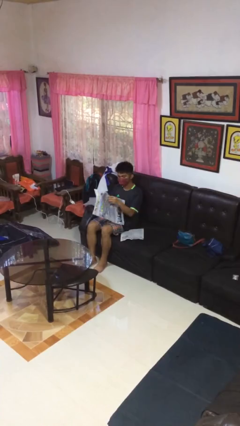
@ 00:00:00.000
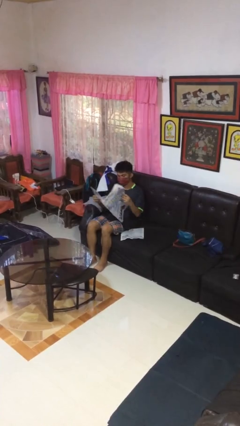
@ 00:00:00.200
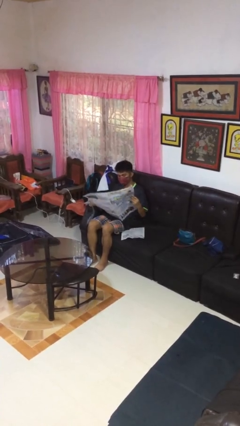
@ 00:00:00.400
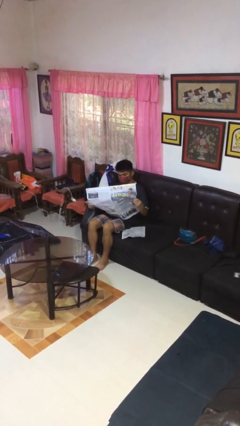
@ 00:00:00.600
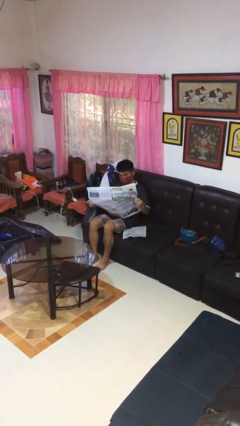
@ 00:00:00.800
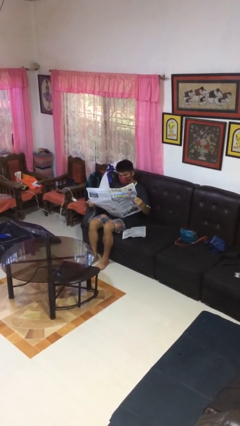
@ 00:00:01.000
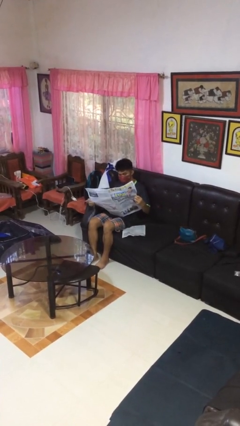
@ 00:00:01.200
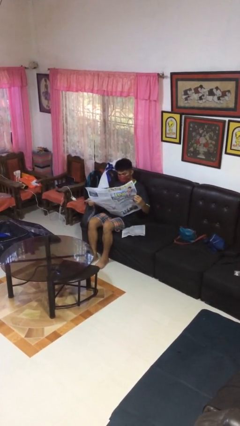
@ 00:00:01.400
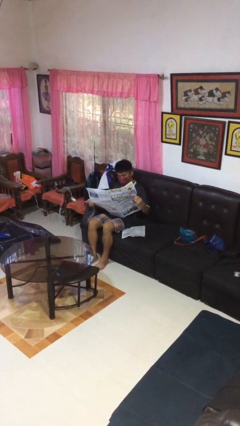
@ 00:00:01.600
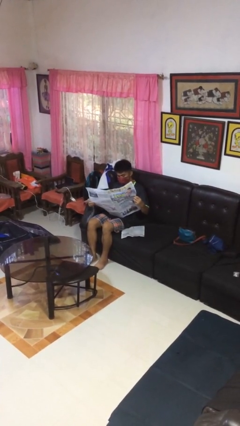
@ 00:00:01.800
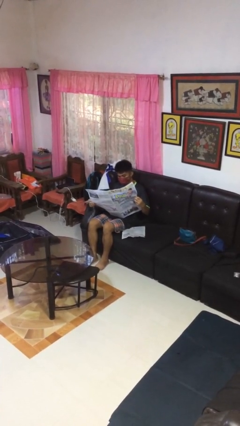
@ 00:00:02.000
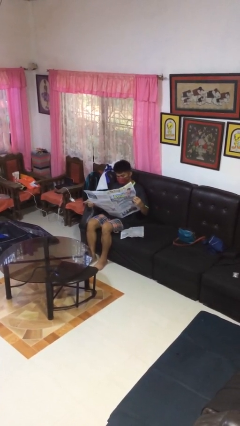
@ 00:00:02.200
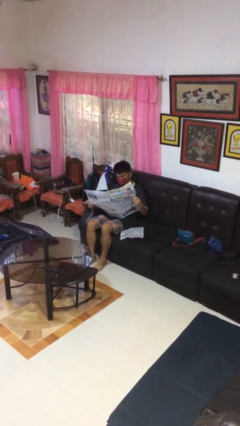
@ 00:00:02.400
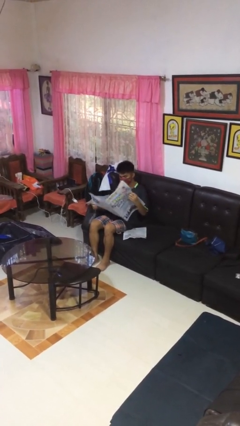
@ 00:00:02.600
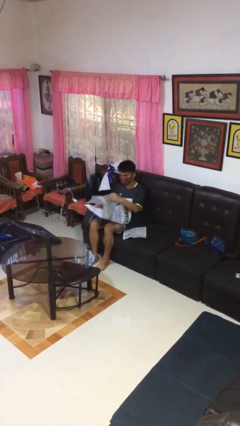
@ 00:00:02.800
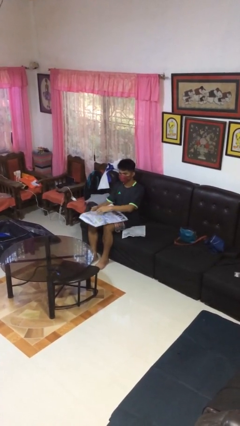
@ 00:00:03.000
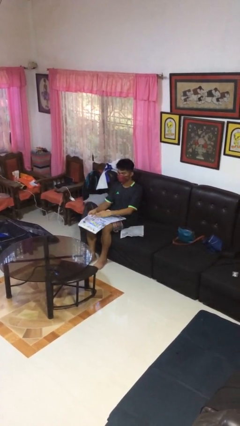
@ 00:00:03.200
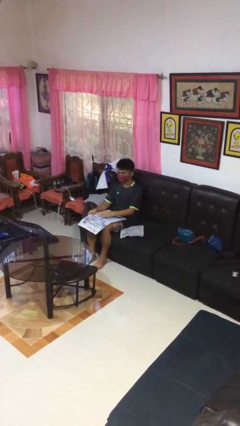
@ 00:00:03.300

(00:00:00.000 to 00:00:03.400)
person reads newspaper

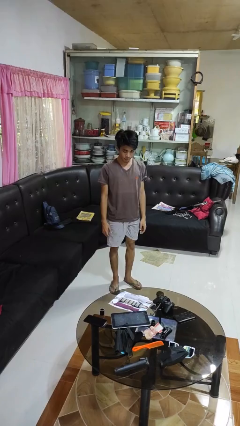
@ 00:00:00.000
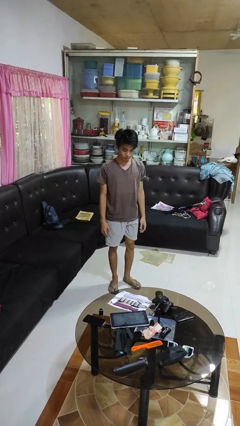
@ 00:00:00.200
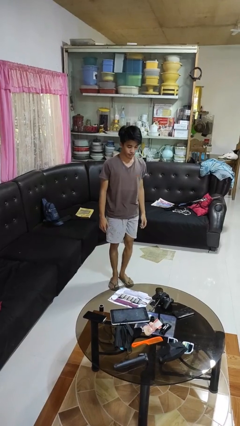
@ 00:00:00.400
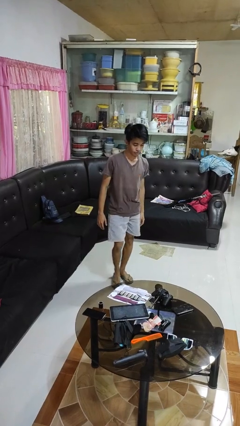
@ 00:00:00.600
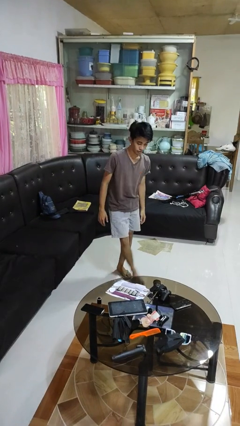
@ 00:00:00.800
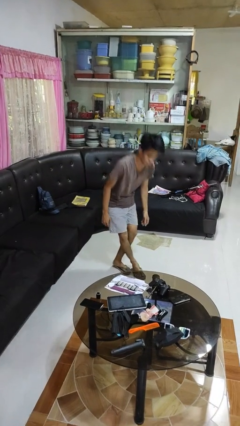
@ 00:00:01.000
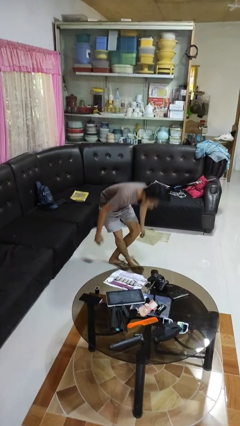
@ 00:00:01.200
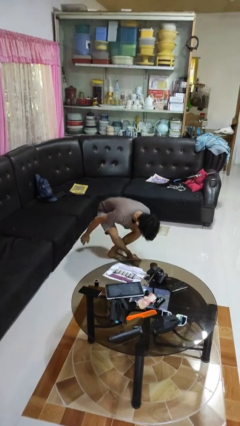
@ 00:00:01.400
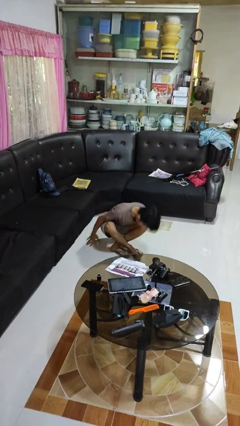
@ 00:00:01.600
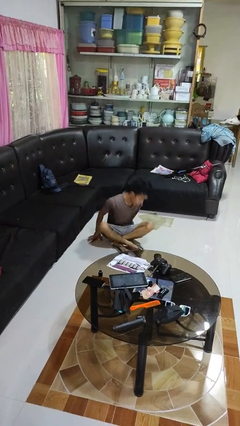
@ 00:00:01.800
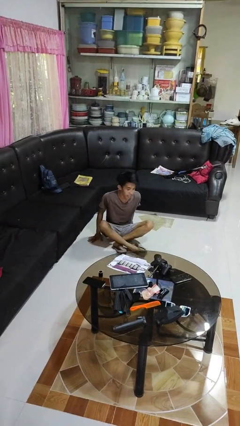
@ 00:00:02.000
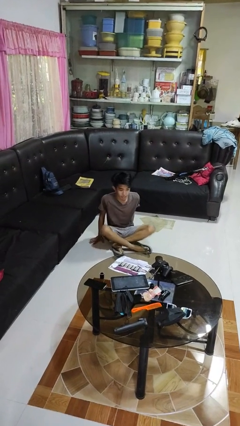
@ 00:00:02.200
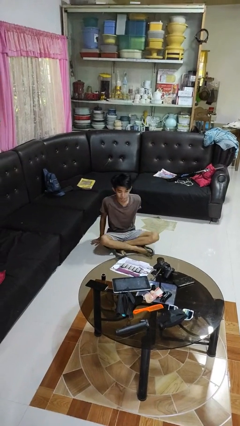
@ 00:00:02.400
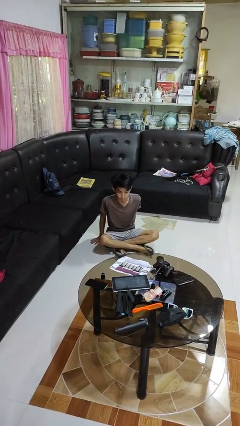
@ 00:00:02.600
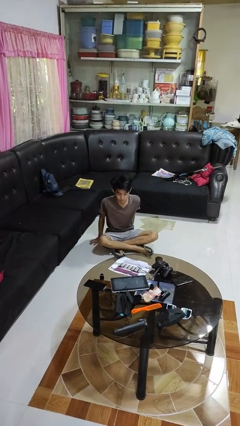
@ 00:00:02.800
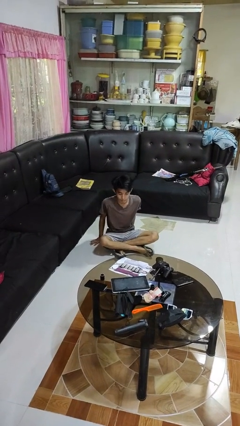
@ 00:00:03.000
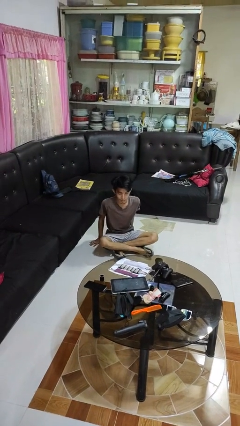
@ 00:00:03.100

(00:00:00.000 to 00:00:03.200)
person sits crisscross

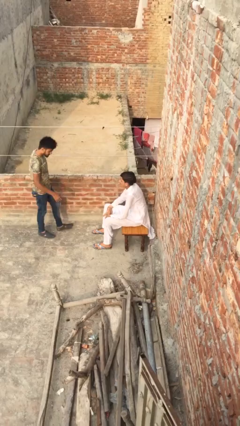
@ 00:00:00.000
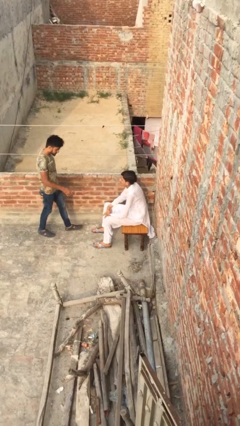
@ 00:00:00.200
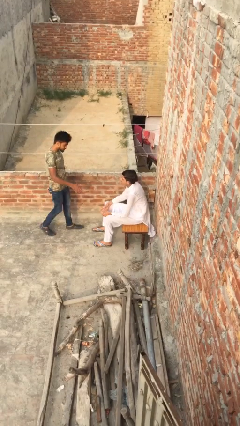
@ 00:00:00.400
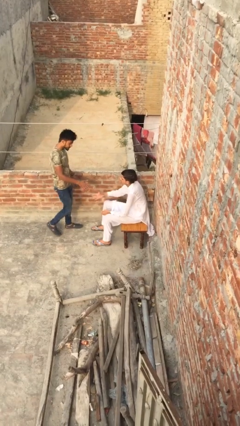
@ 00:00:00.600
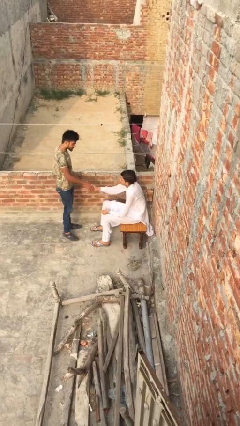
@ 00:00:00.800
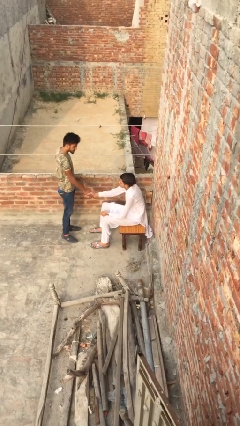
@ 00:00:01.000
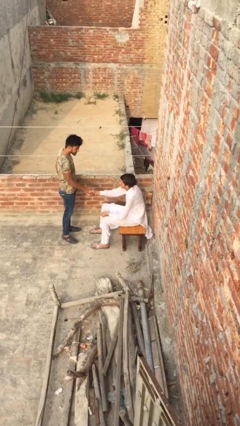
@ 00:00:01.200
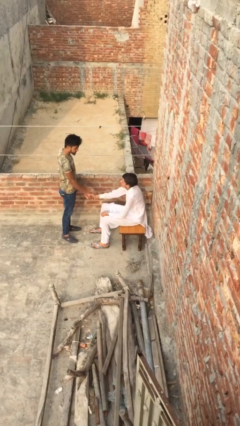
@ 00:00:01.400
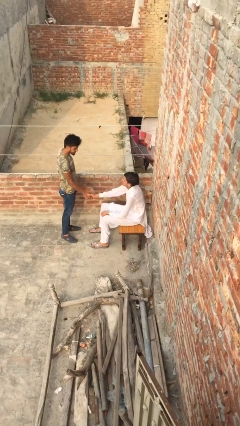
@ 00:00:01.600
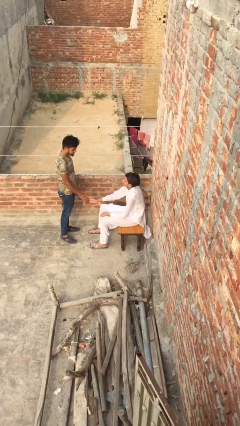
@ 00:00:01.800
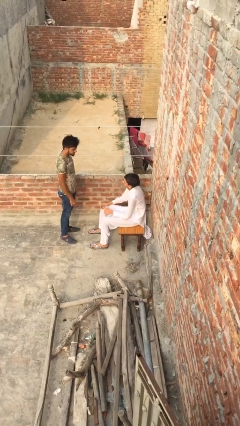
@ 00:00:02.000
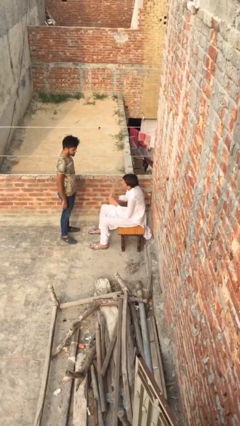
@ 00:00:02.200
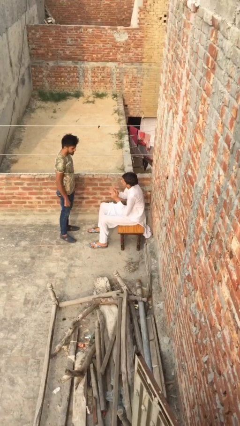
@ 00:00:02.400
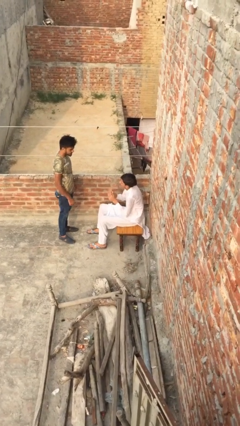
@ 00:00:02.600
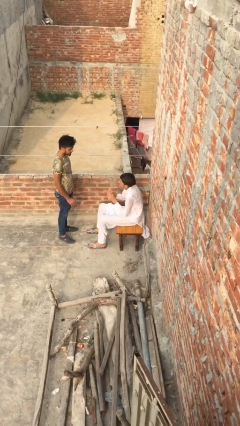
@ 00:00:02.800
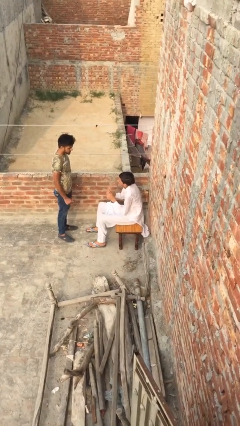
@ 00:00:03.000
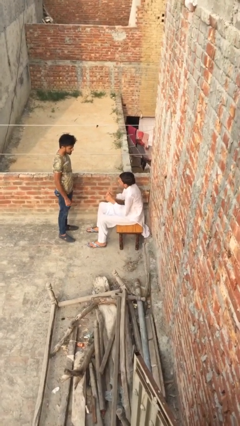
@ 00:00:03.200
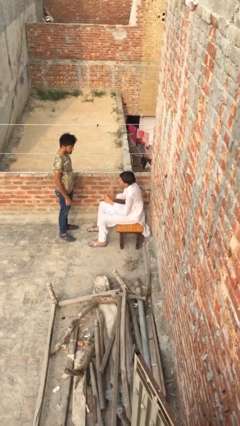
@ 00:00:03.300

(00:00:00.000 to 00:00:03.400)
person shakes hand

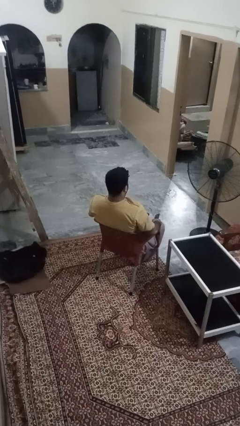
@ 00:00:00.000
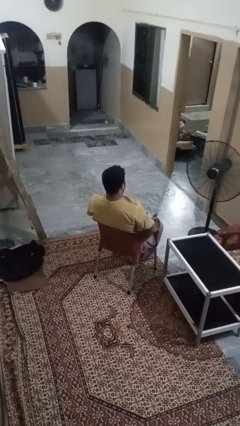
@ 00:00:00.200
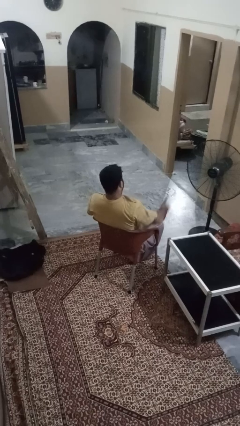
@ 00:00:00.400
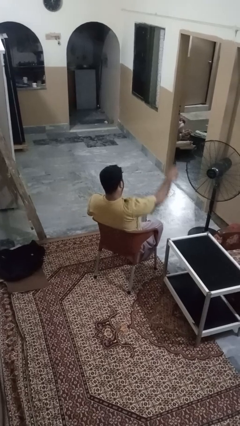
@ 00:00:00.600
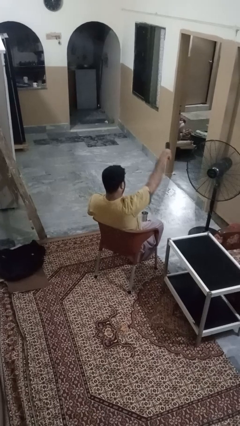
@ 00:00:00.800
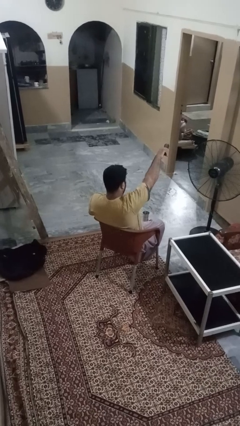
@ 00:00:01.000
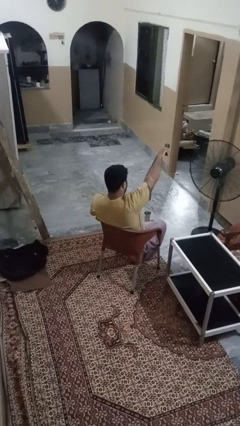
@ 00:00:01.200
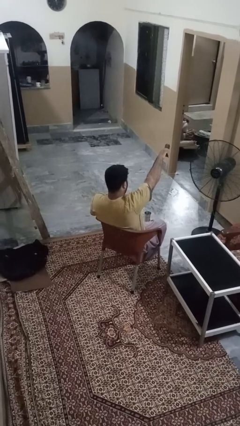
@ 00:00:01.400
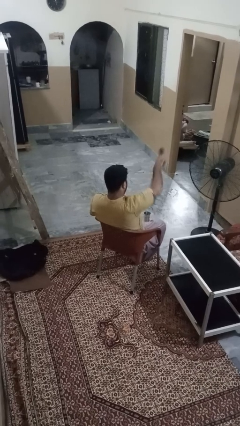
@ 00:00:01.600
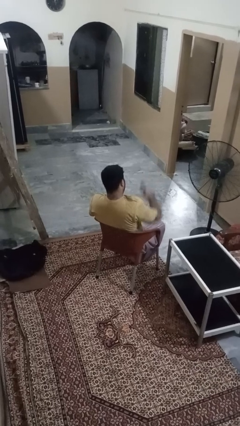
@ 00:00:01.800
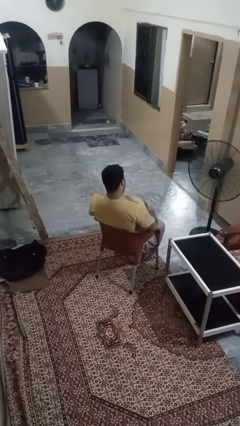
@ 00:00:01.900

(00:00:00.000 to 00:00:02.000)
person uses television remote

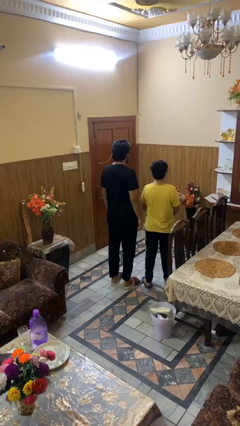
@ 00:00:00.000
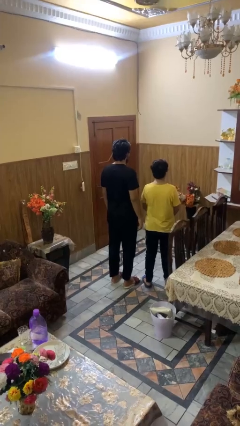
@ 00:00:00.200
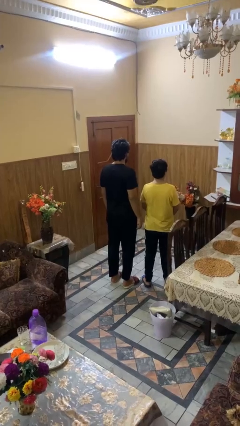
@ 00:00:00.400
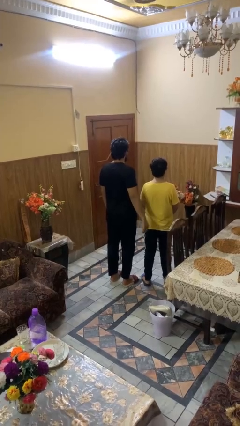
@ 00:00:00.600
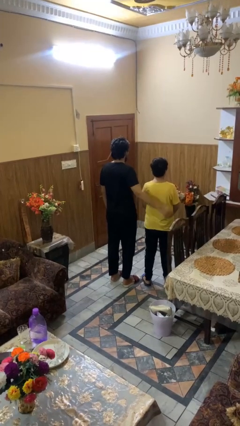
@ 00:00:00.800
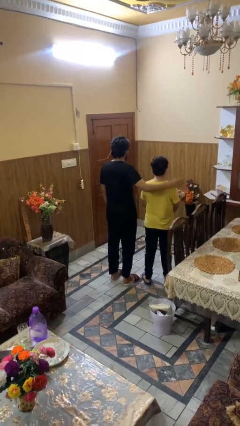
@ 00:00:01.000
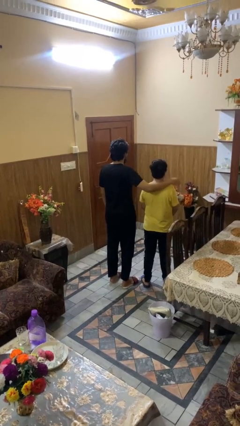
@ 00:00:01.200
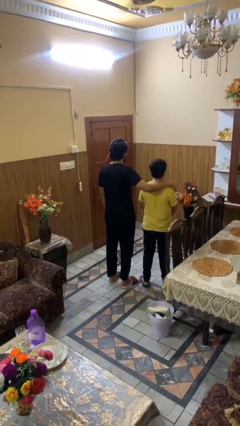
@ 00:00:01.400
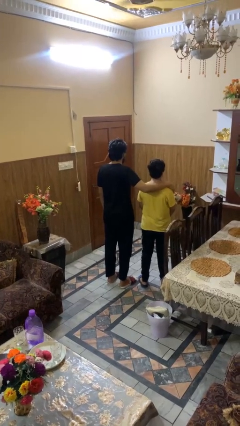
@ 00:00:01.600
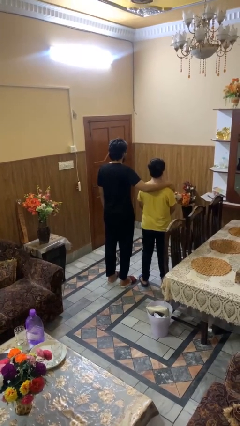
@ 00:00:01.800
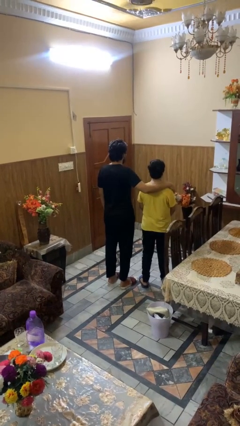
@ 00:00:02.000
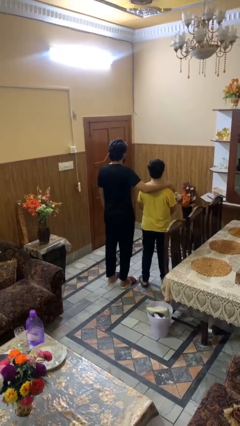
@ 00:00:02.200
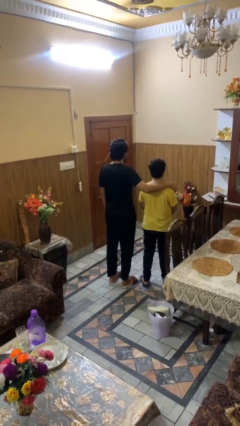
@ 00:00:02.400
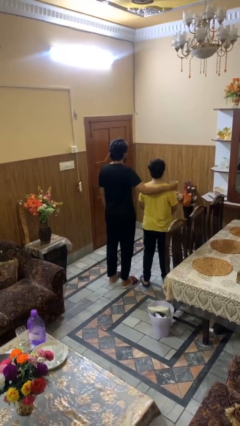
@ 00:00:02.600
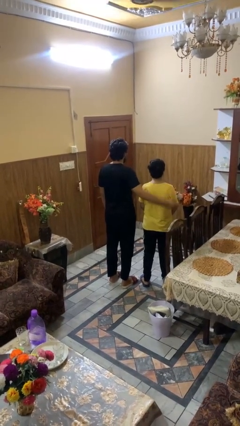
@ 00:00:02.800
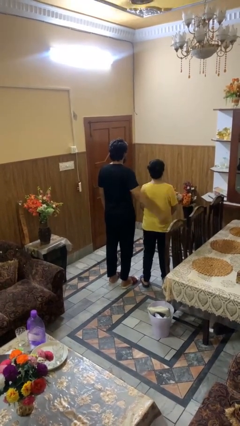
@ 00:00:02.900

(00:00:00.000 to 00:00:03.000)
person pounds shoulders of person

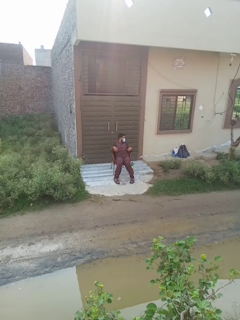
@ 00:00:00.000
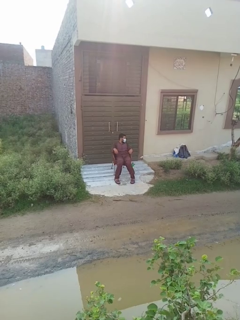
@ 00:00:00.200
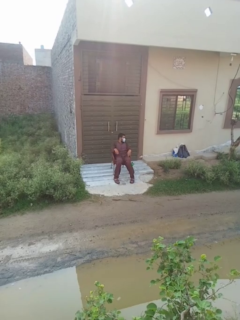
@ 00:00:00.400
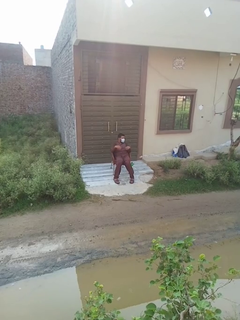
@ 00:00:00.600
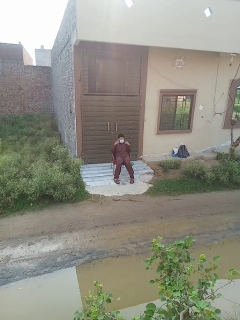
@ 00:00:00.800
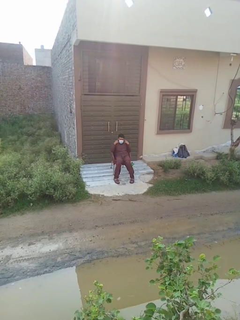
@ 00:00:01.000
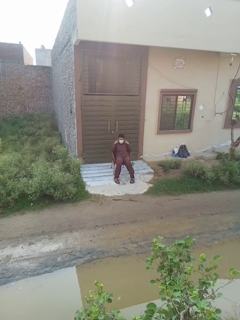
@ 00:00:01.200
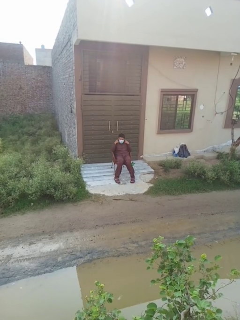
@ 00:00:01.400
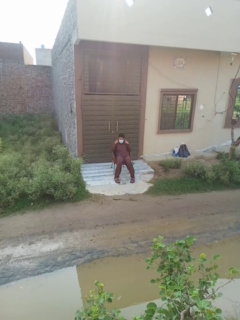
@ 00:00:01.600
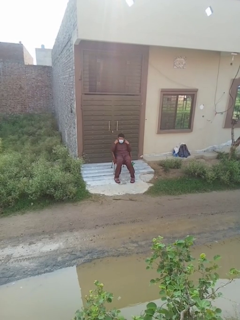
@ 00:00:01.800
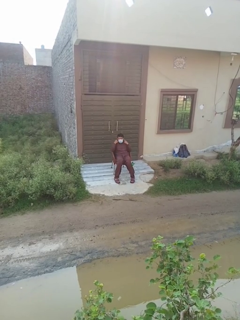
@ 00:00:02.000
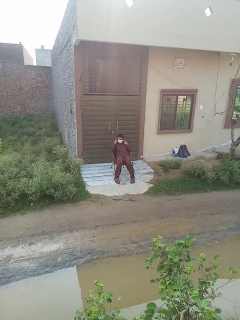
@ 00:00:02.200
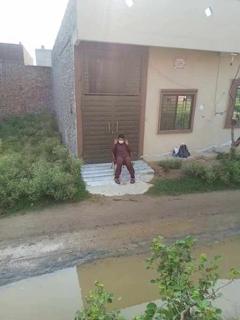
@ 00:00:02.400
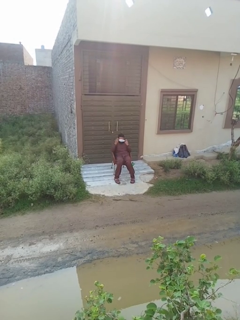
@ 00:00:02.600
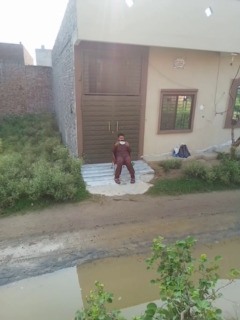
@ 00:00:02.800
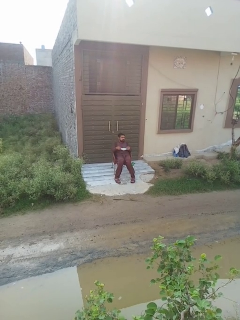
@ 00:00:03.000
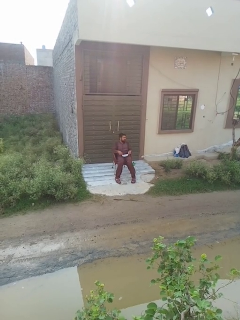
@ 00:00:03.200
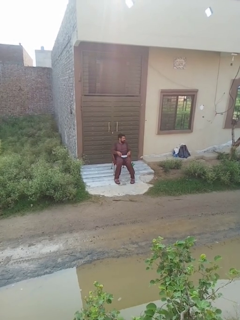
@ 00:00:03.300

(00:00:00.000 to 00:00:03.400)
person takes off facemask
